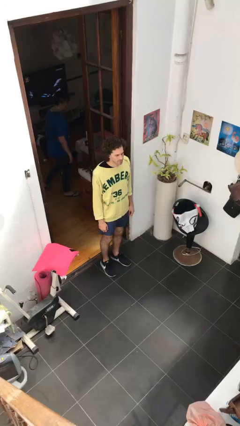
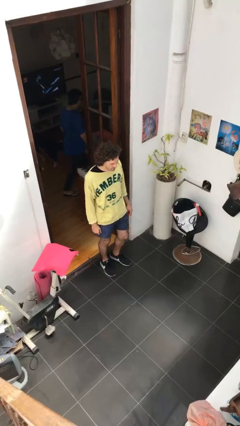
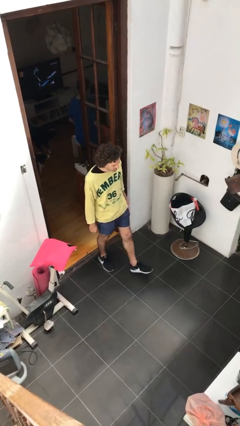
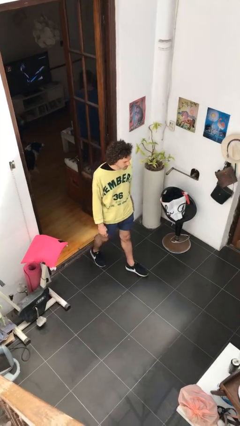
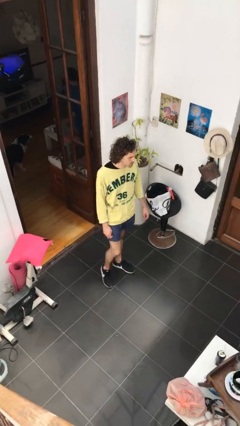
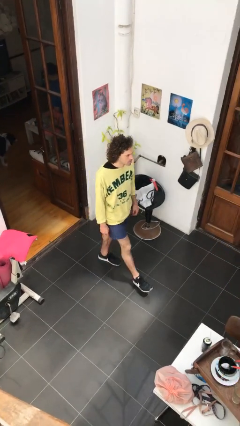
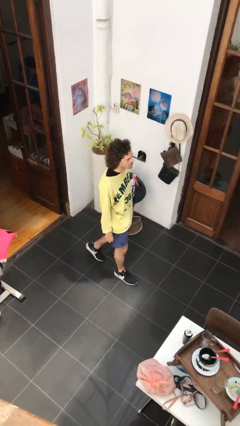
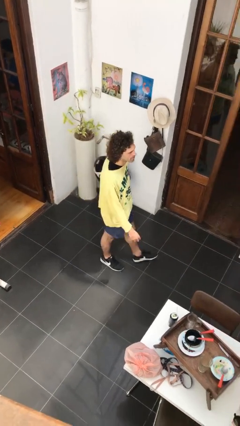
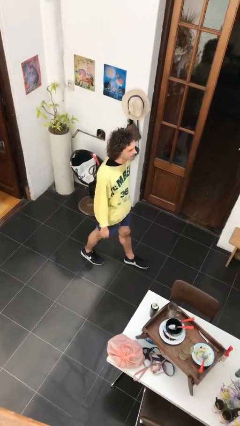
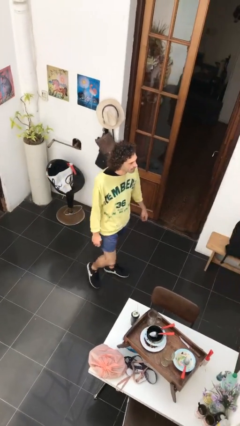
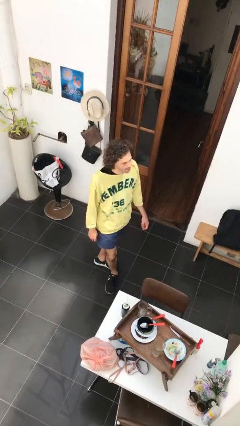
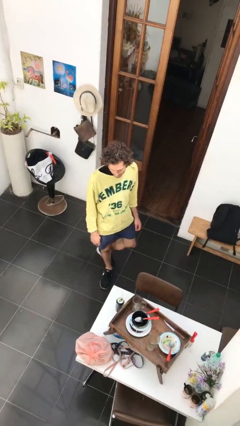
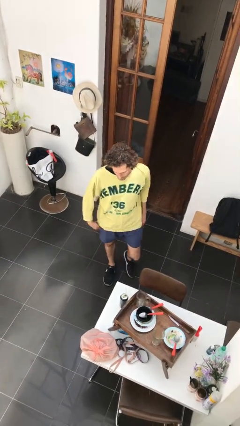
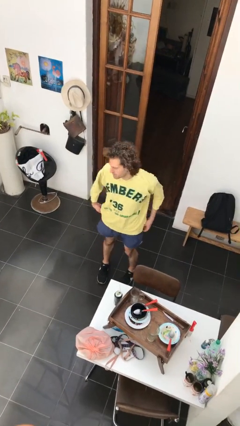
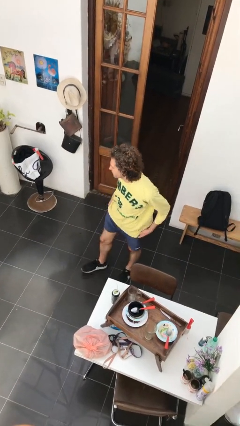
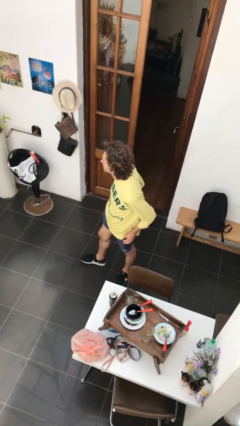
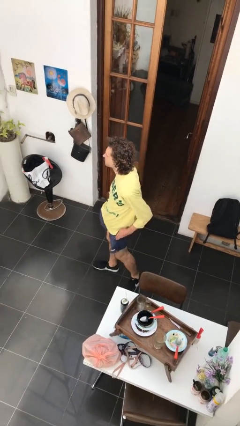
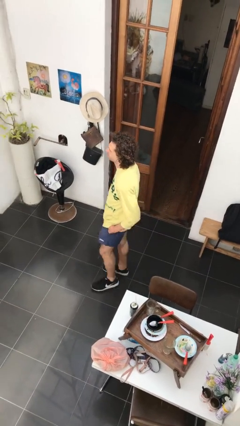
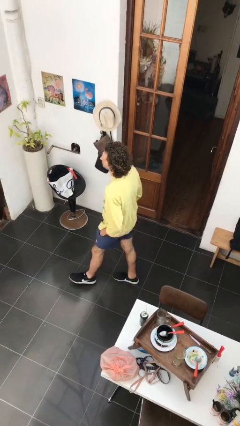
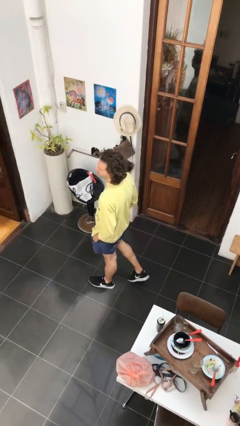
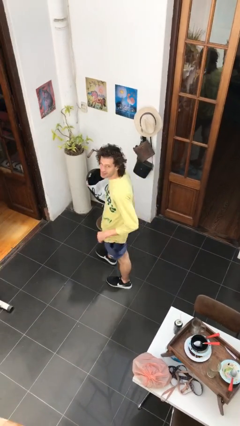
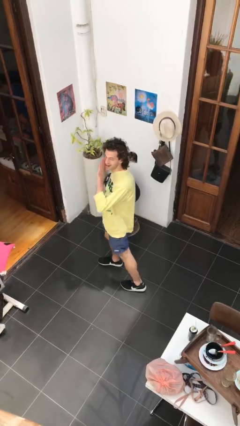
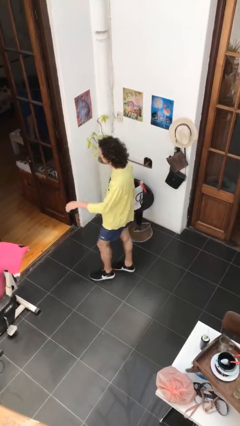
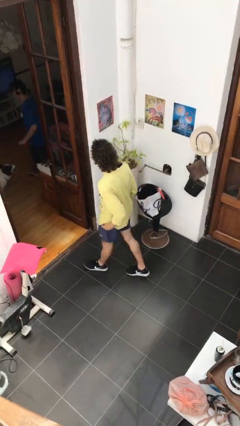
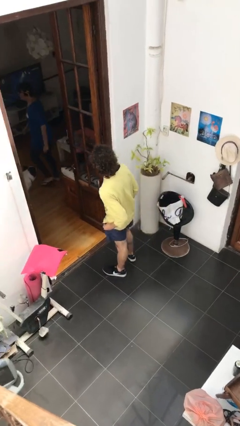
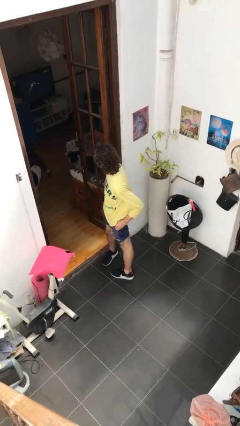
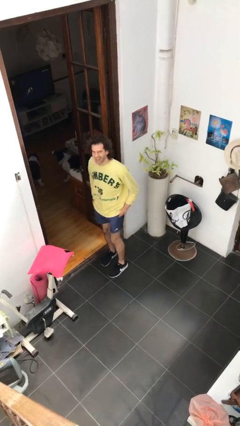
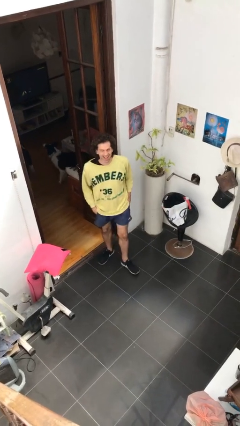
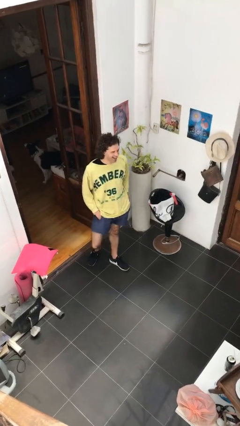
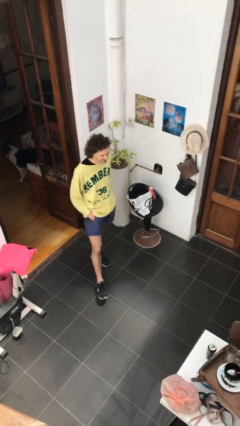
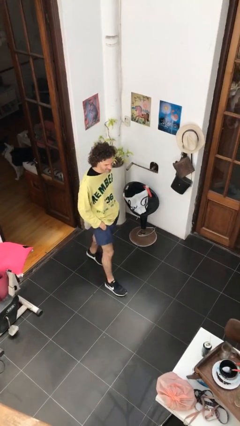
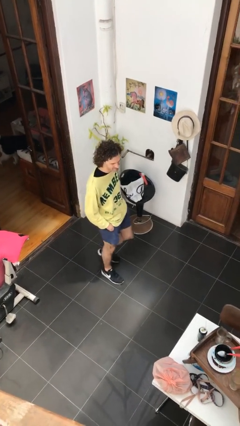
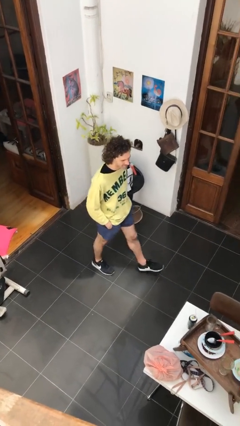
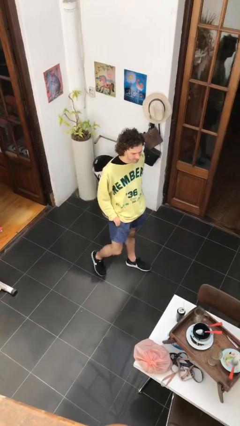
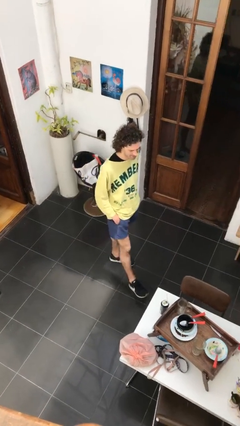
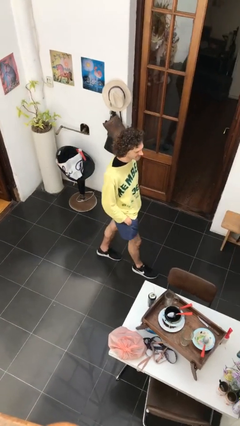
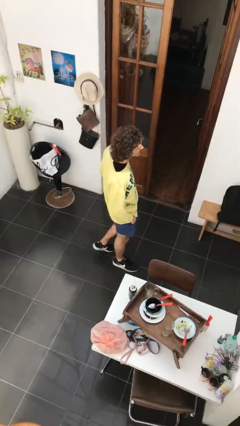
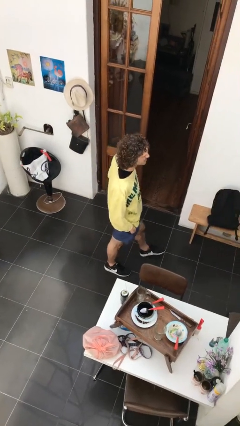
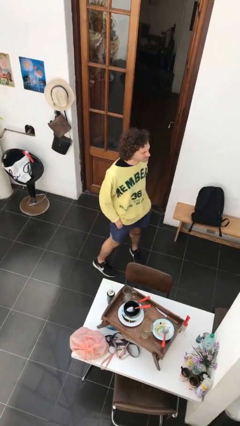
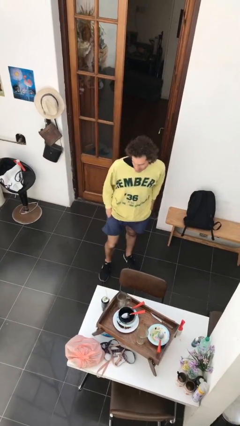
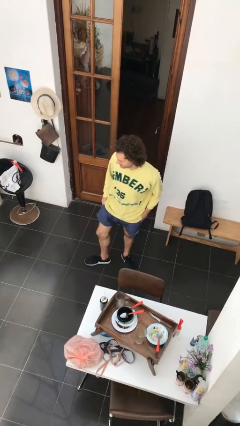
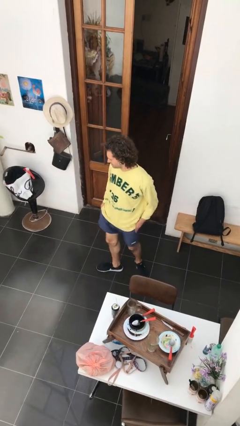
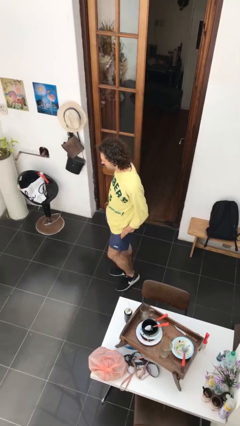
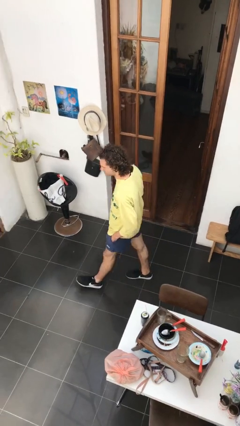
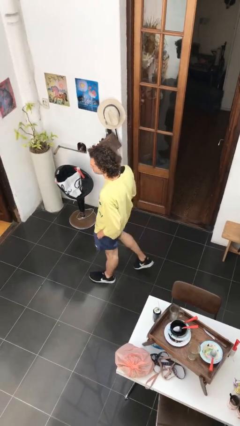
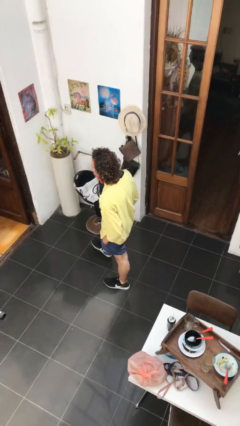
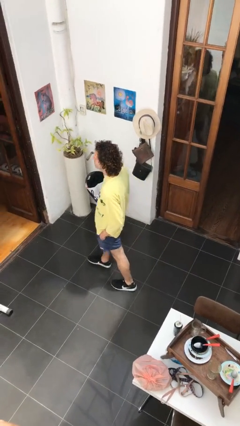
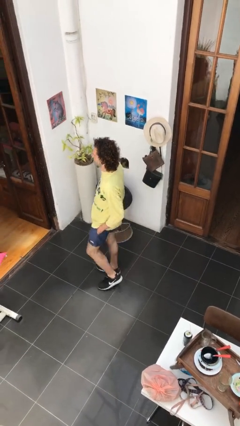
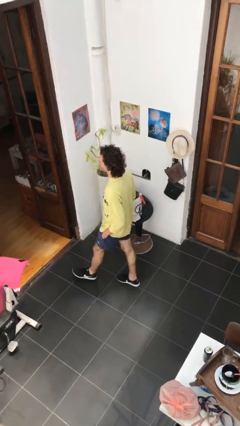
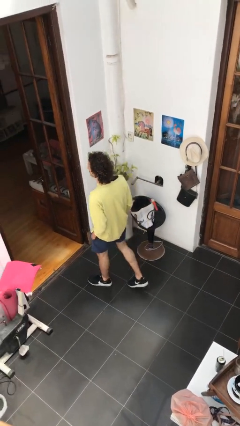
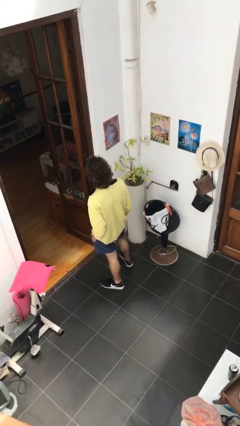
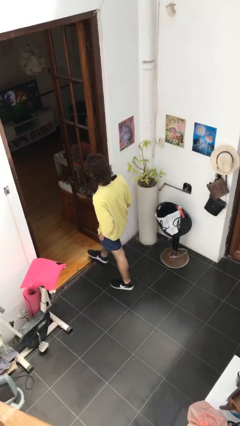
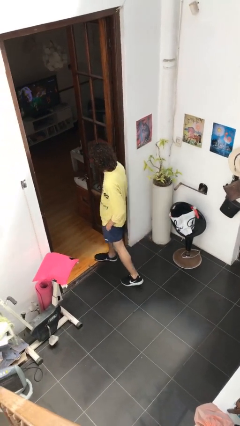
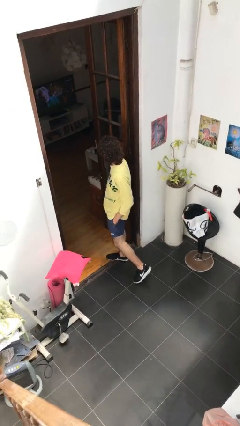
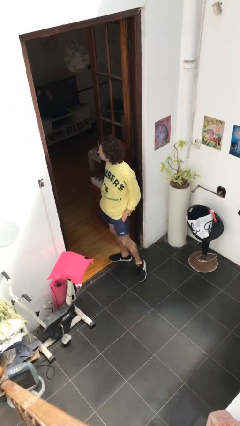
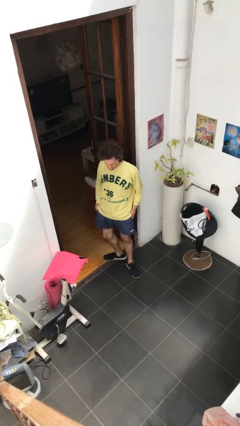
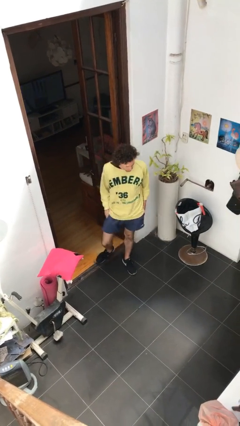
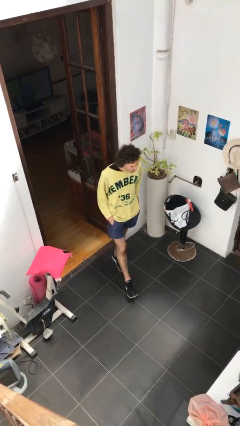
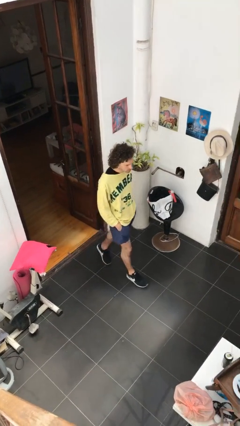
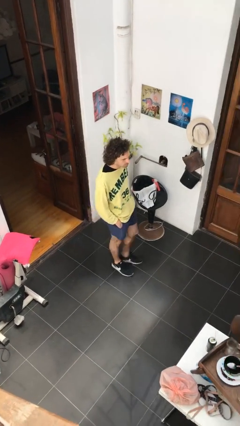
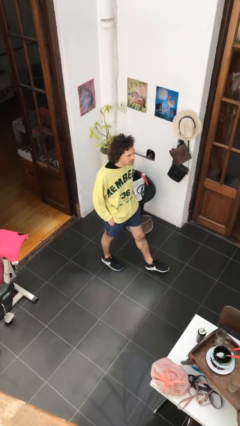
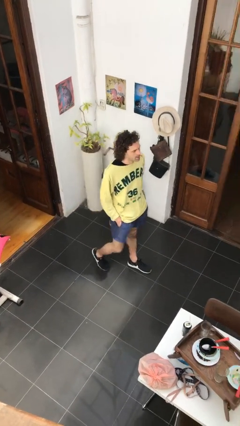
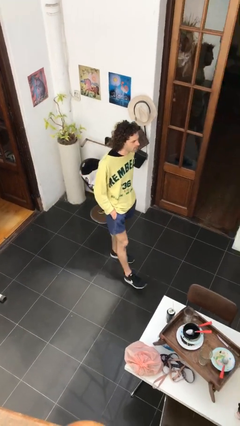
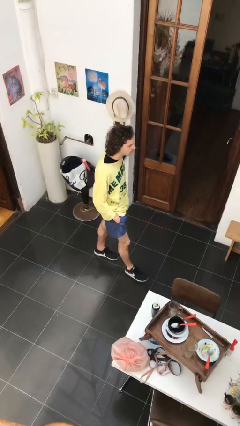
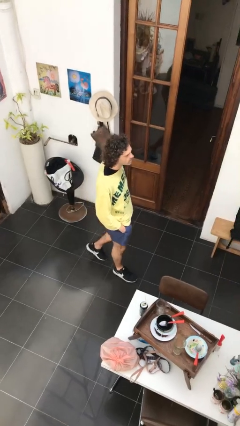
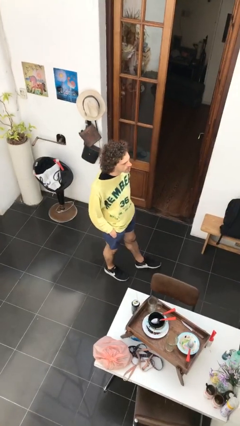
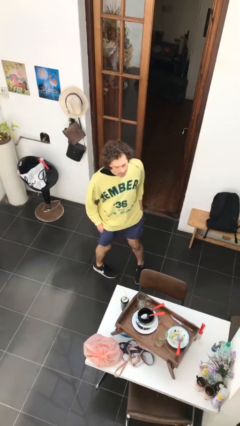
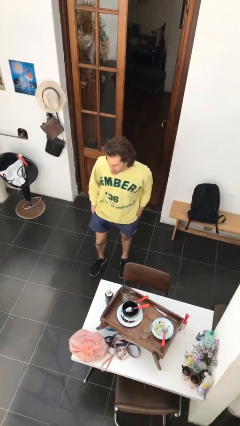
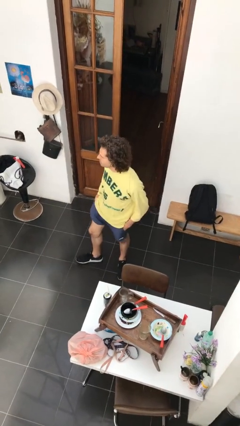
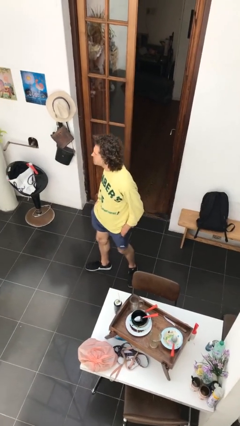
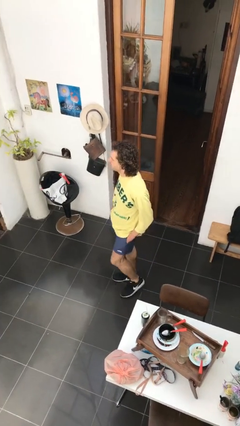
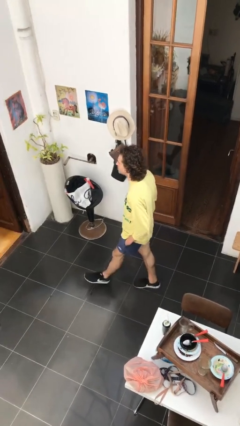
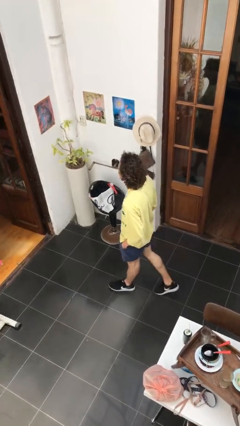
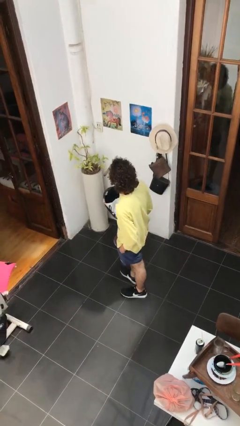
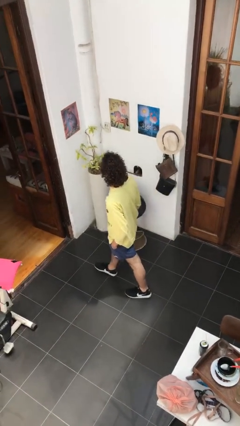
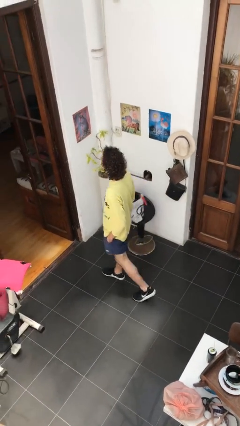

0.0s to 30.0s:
person walks

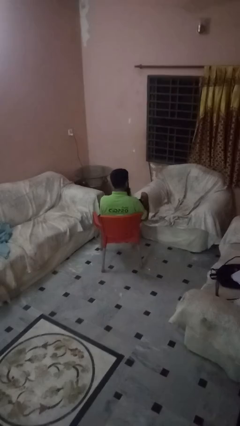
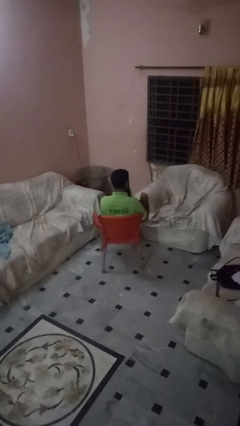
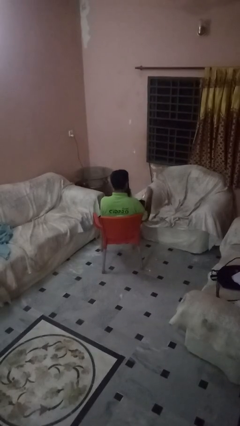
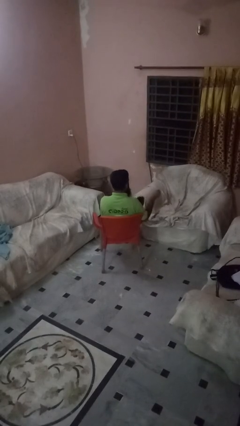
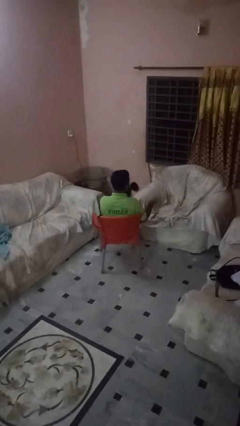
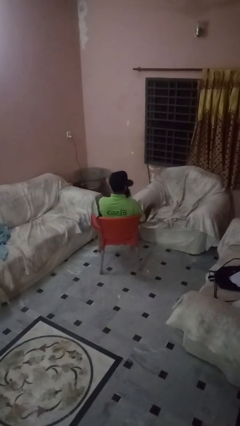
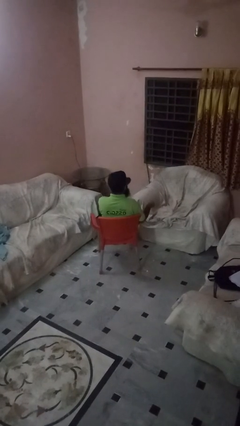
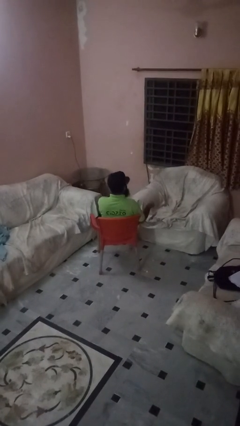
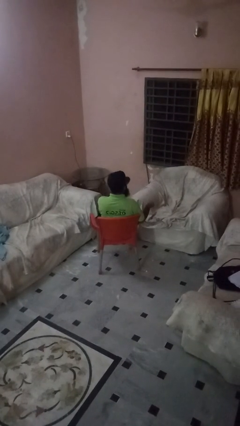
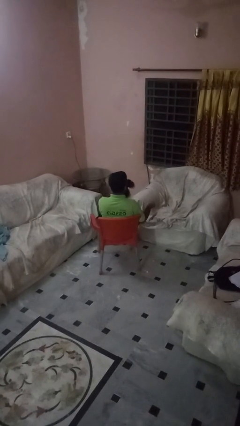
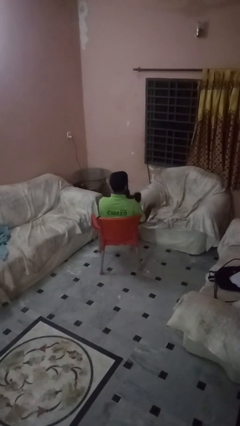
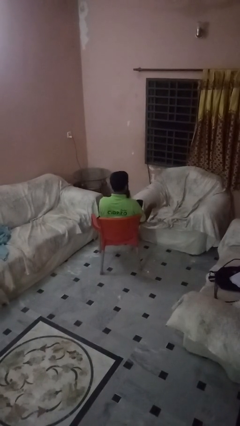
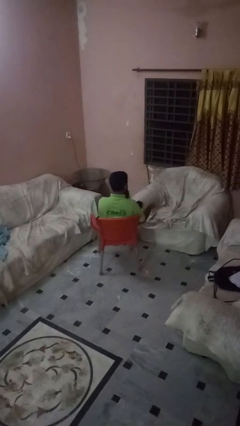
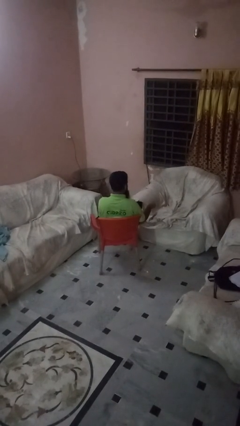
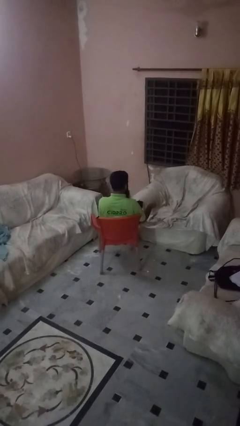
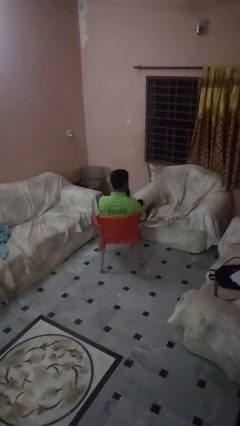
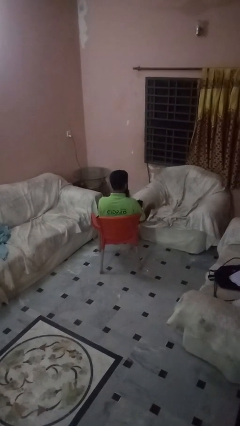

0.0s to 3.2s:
person drinks from mug
